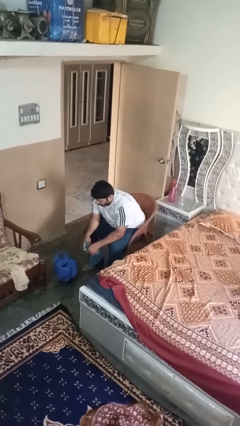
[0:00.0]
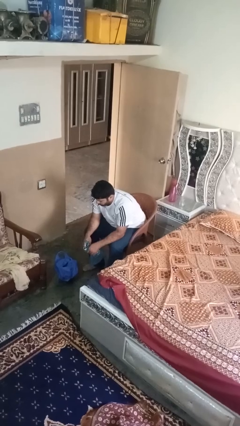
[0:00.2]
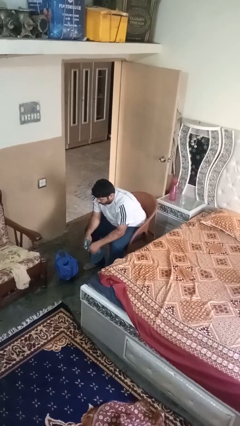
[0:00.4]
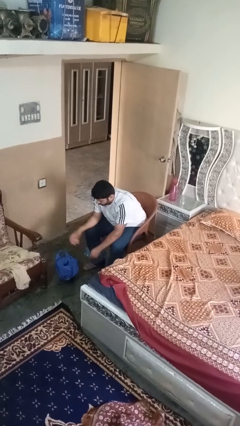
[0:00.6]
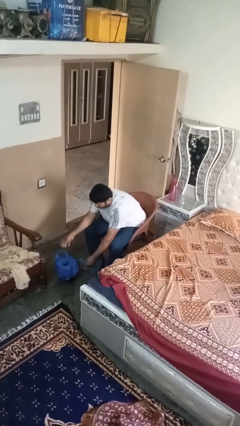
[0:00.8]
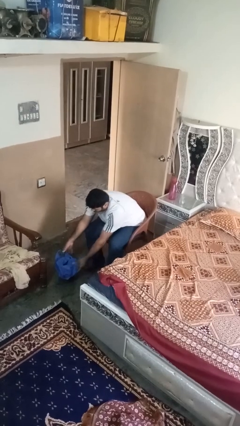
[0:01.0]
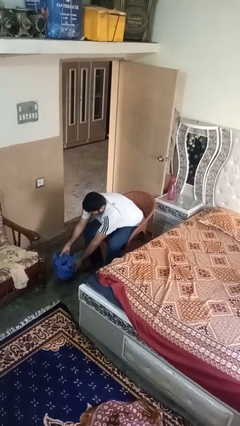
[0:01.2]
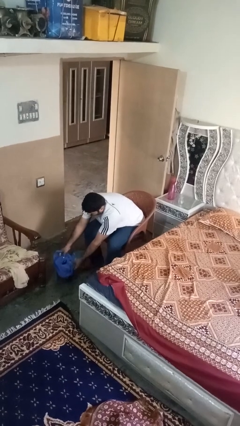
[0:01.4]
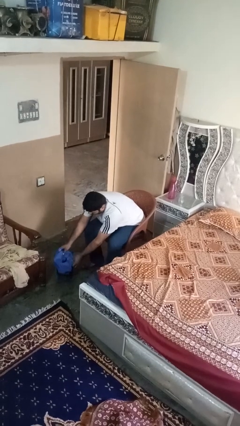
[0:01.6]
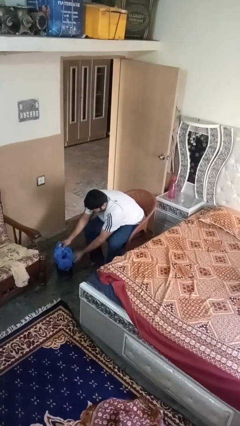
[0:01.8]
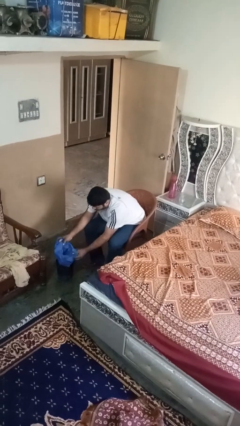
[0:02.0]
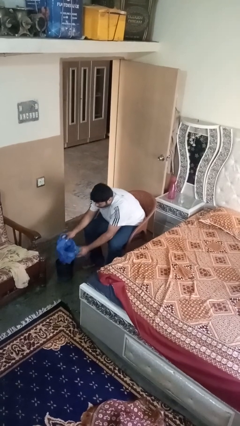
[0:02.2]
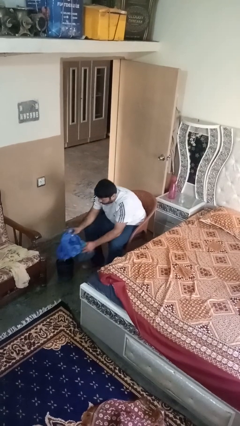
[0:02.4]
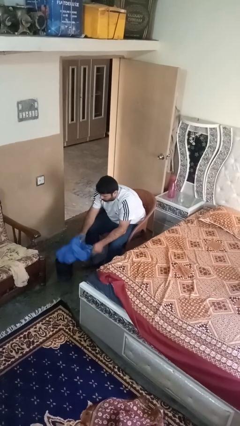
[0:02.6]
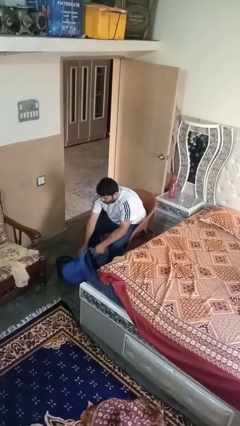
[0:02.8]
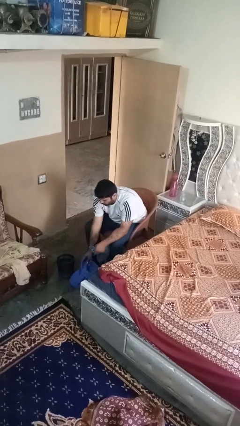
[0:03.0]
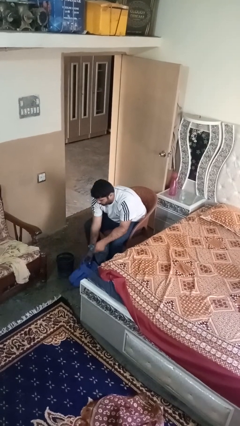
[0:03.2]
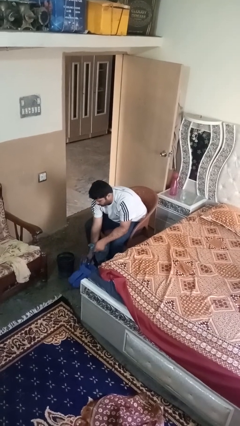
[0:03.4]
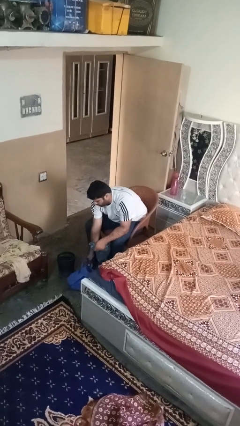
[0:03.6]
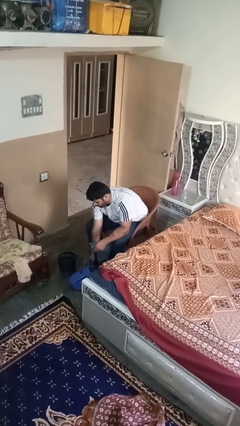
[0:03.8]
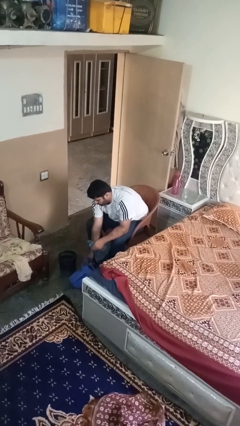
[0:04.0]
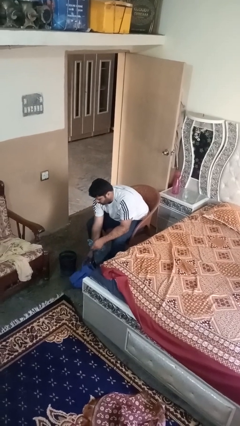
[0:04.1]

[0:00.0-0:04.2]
person removes trashbag from trashcan

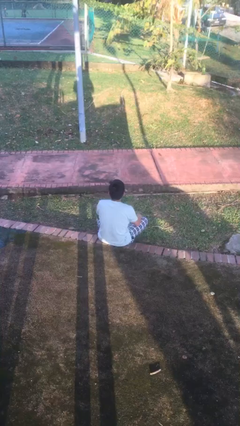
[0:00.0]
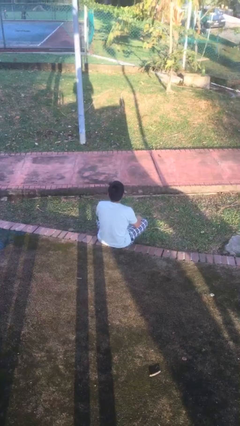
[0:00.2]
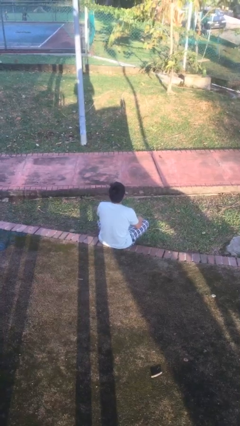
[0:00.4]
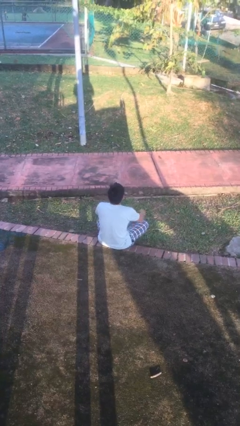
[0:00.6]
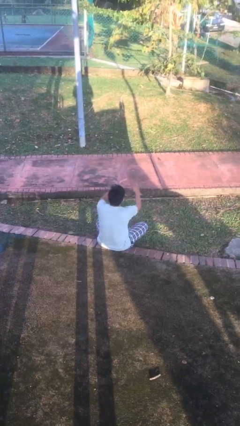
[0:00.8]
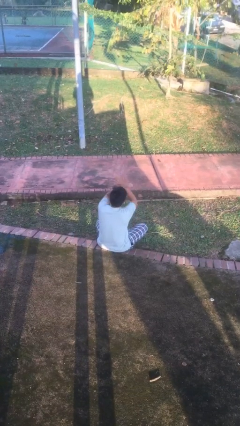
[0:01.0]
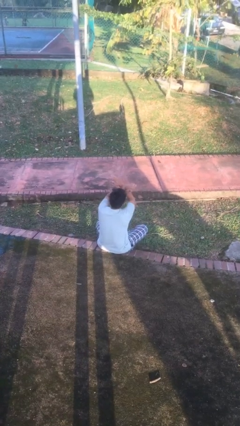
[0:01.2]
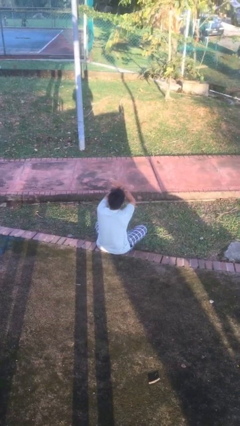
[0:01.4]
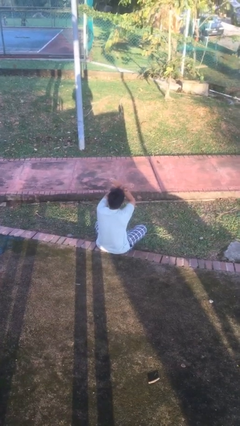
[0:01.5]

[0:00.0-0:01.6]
person gestures arms x

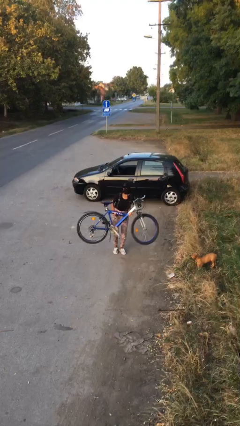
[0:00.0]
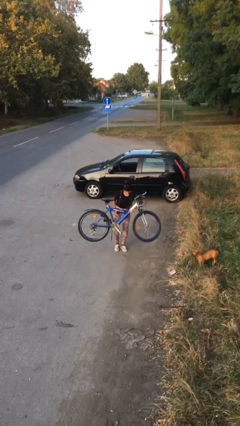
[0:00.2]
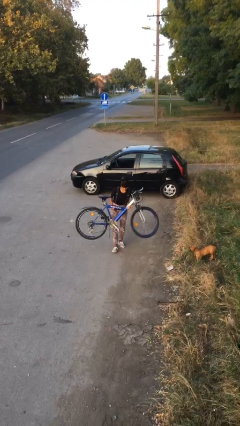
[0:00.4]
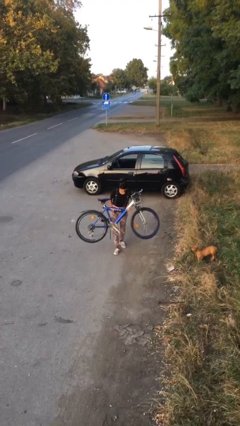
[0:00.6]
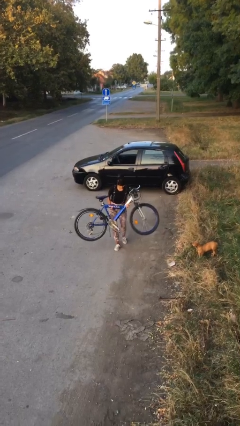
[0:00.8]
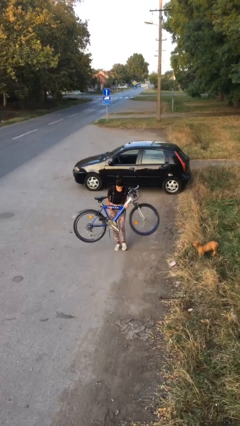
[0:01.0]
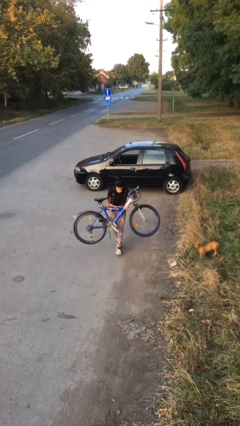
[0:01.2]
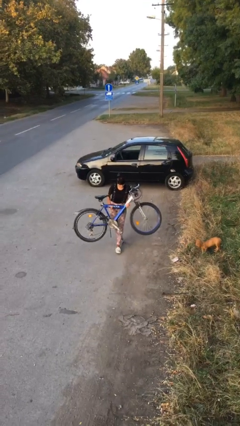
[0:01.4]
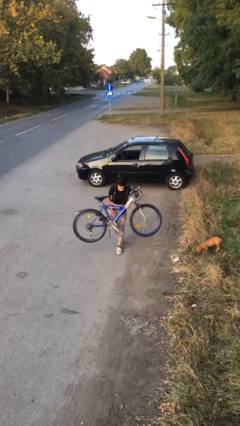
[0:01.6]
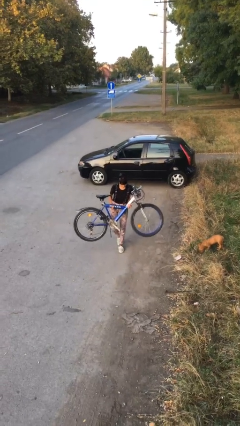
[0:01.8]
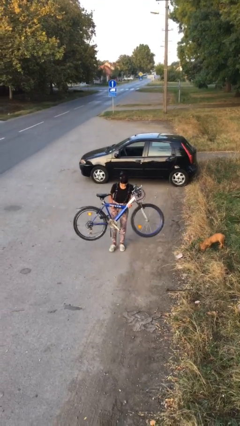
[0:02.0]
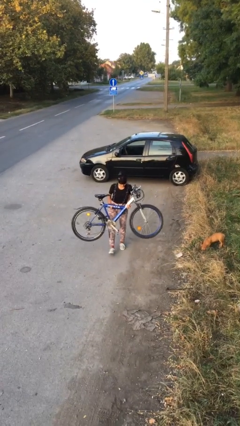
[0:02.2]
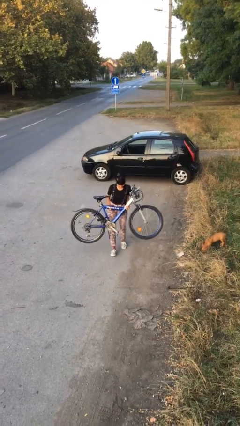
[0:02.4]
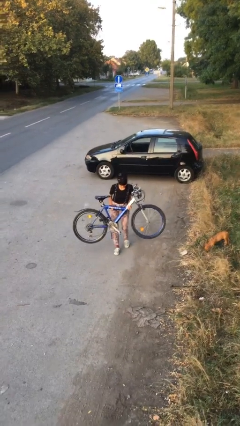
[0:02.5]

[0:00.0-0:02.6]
person carries heavy object

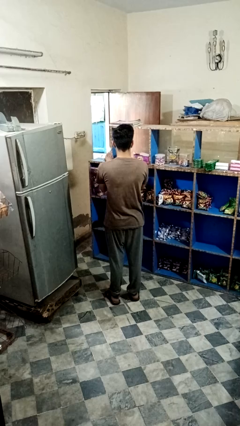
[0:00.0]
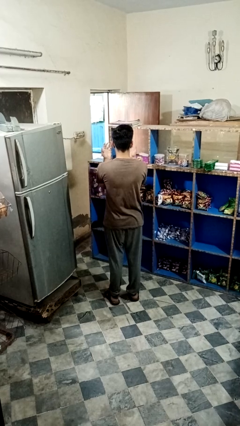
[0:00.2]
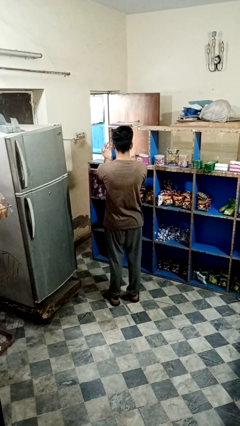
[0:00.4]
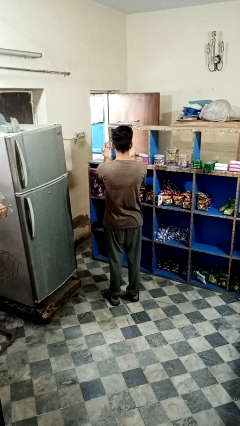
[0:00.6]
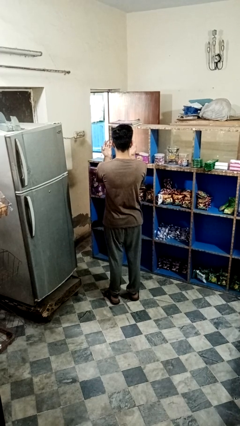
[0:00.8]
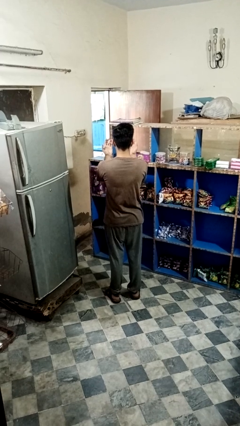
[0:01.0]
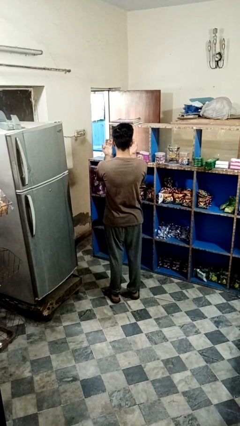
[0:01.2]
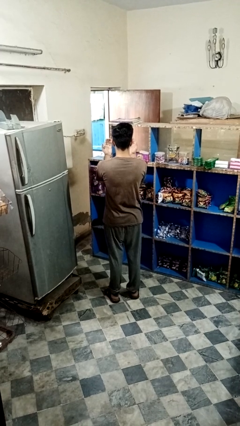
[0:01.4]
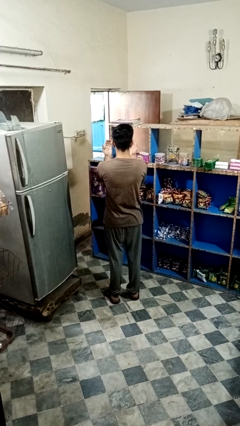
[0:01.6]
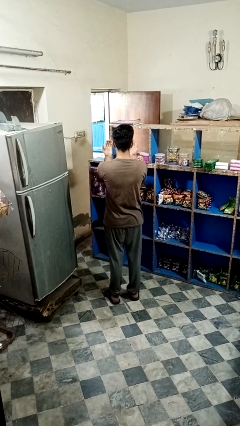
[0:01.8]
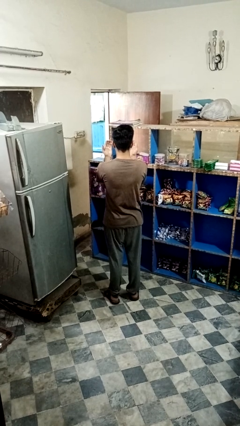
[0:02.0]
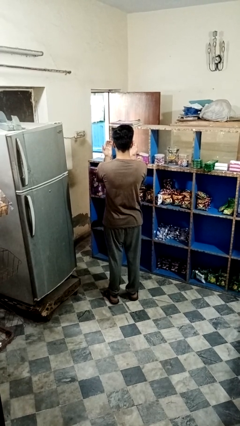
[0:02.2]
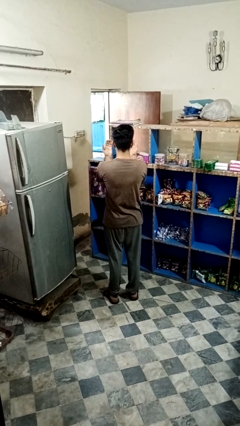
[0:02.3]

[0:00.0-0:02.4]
person prays

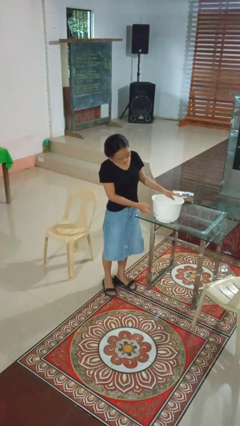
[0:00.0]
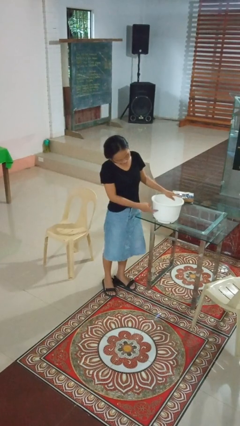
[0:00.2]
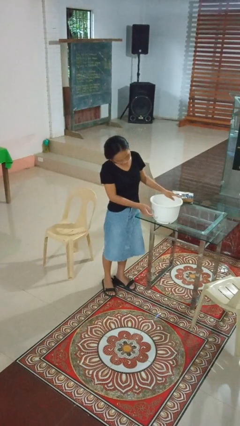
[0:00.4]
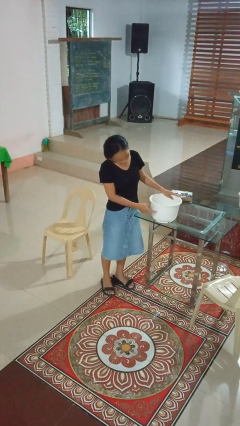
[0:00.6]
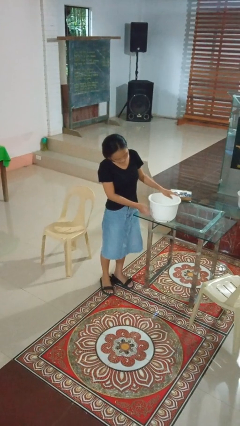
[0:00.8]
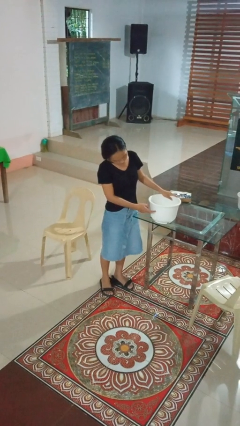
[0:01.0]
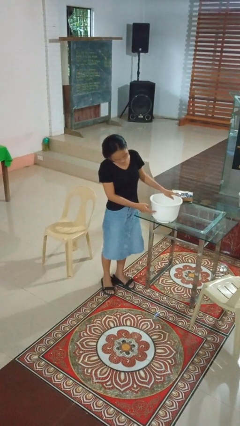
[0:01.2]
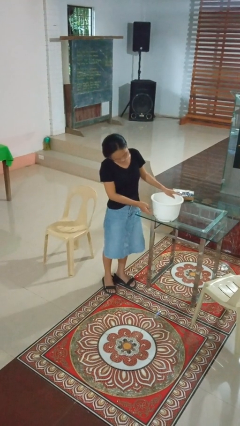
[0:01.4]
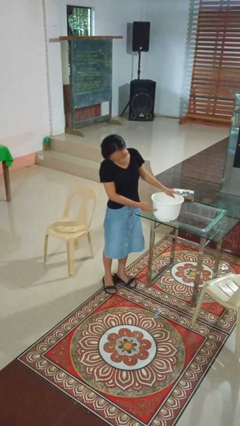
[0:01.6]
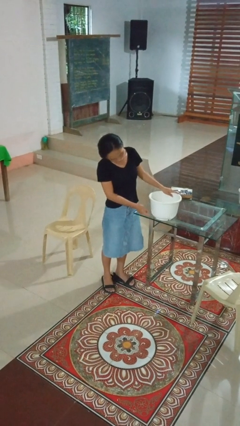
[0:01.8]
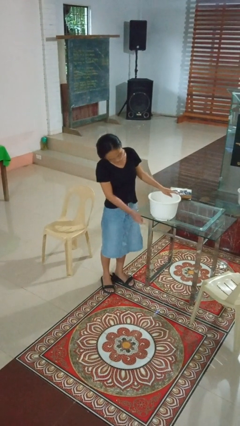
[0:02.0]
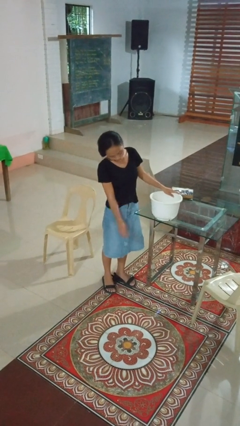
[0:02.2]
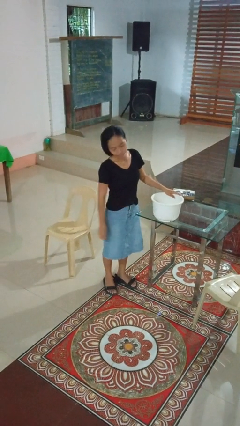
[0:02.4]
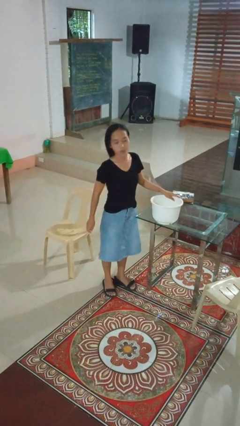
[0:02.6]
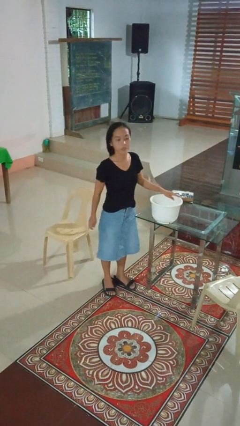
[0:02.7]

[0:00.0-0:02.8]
person taps object with finger

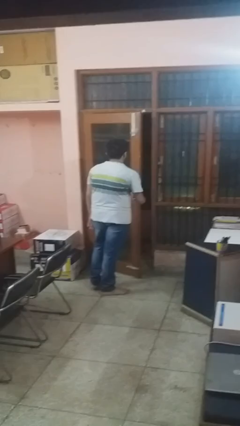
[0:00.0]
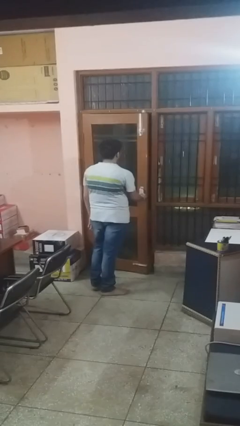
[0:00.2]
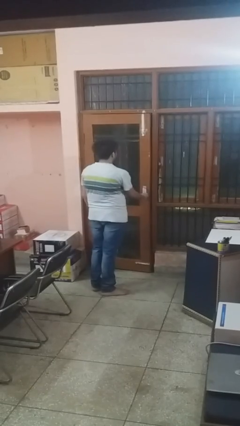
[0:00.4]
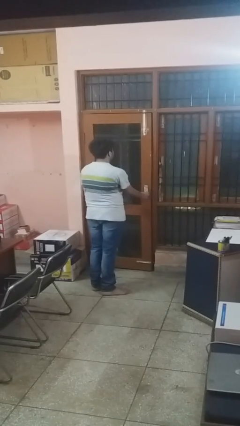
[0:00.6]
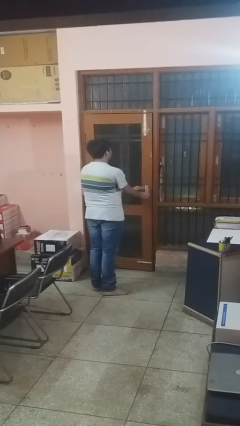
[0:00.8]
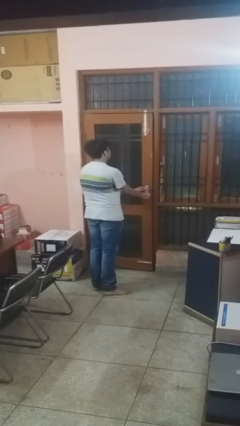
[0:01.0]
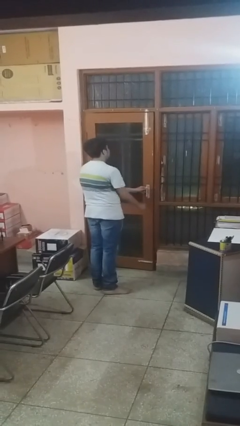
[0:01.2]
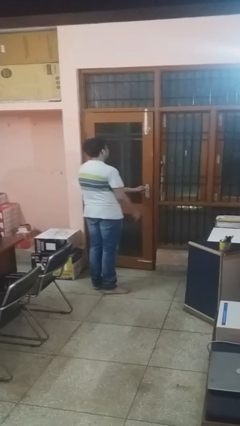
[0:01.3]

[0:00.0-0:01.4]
person closes facility door

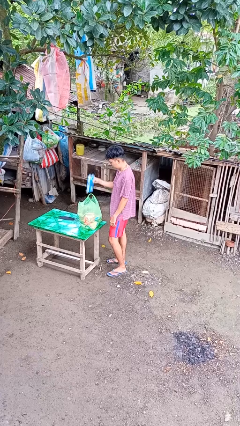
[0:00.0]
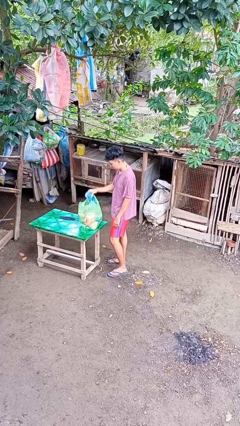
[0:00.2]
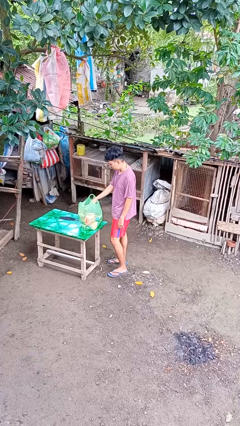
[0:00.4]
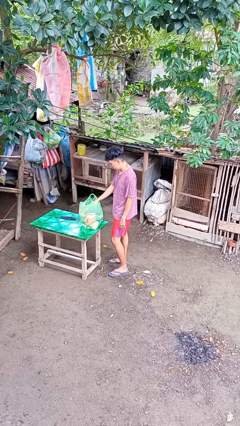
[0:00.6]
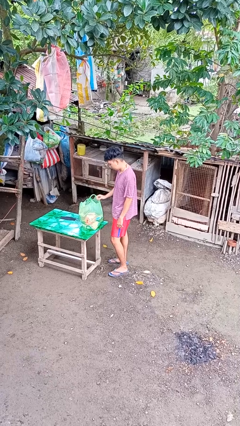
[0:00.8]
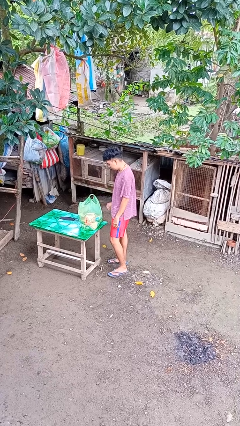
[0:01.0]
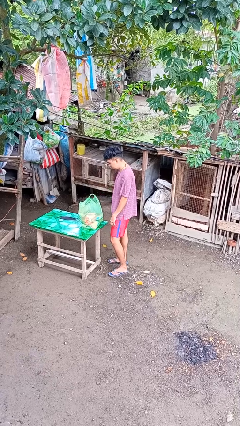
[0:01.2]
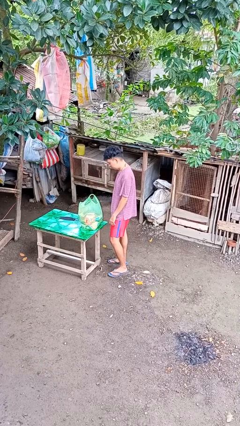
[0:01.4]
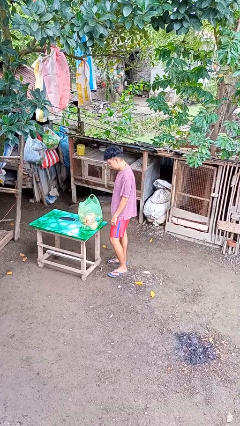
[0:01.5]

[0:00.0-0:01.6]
person puts object into bag

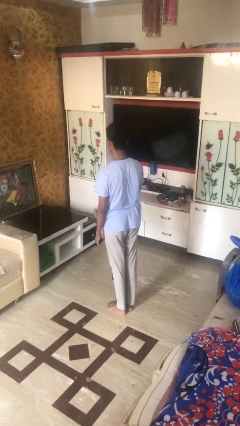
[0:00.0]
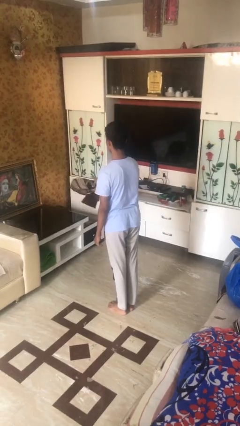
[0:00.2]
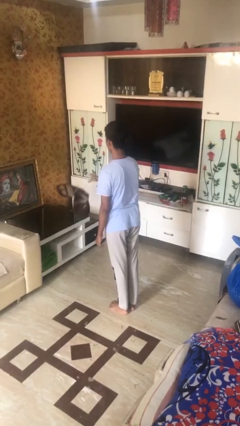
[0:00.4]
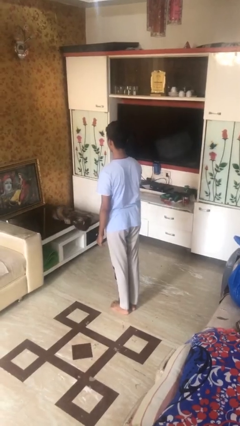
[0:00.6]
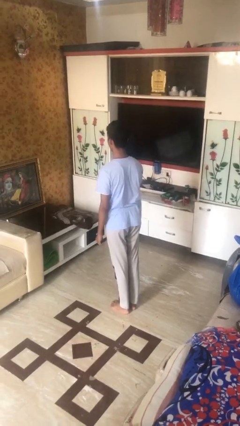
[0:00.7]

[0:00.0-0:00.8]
person throws object on table
